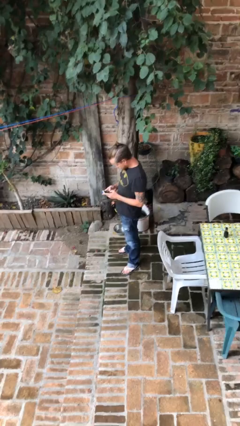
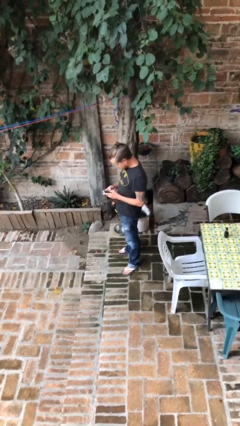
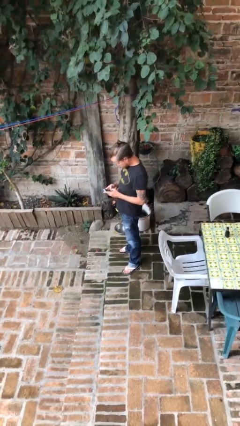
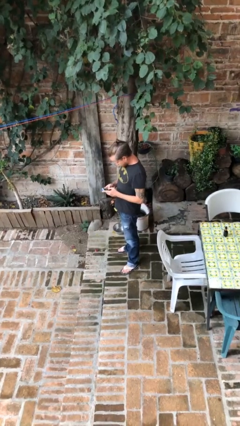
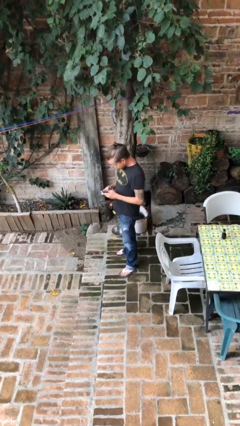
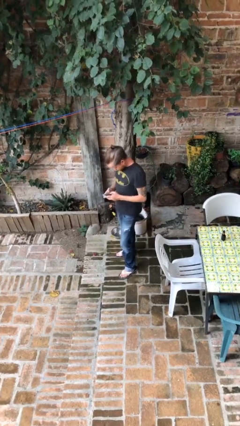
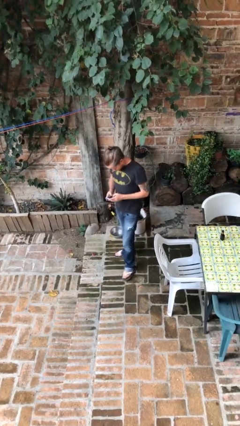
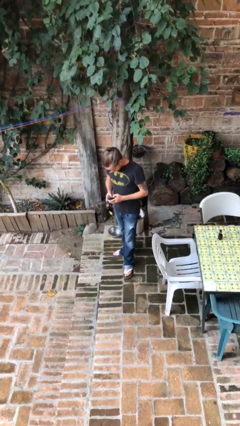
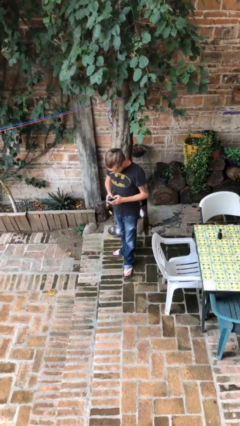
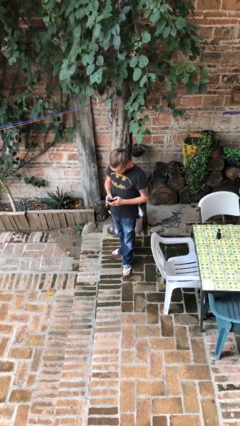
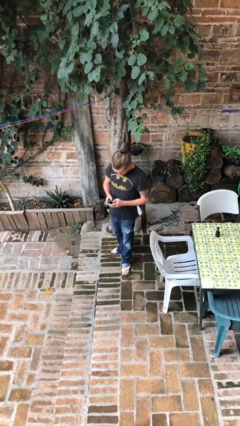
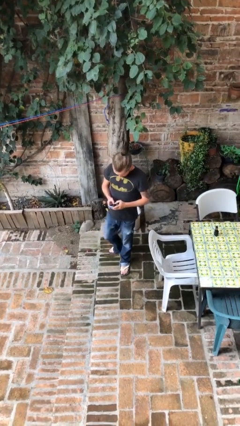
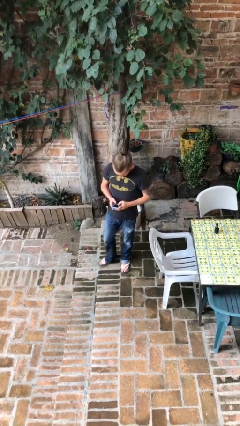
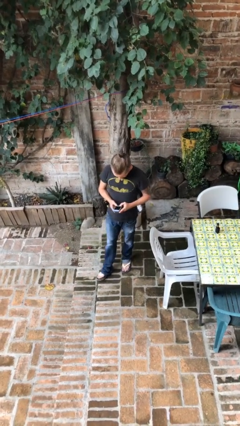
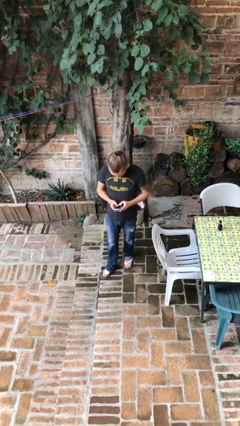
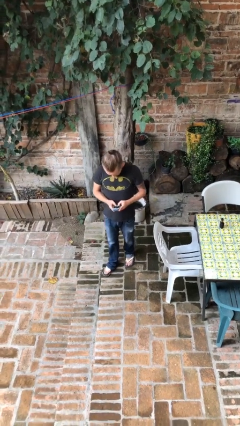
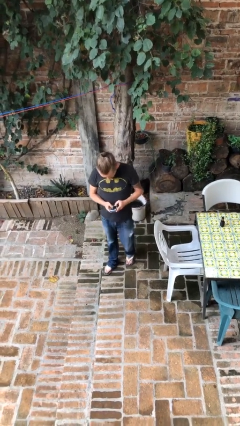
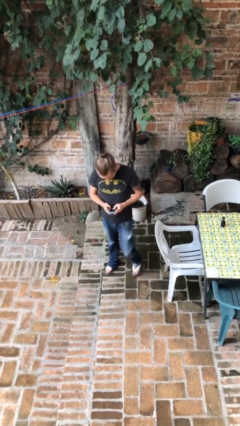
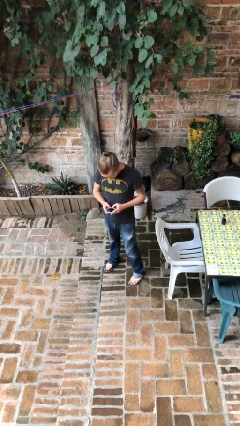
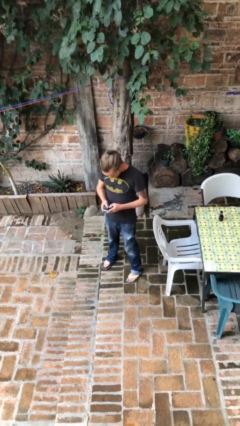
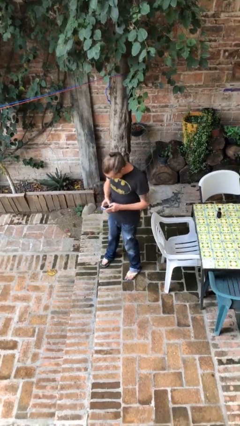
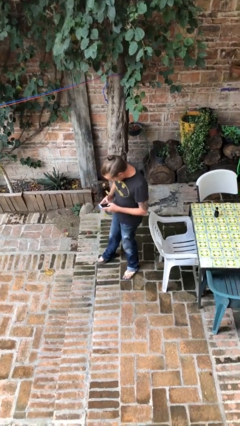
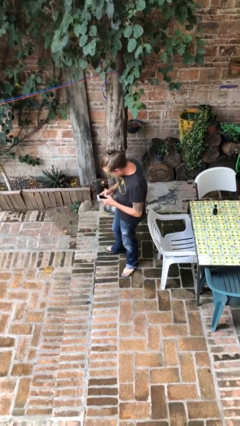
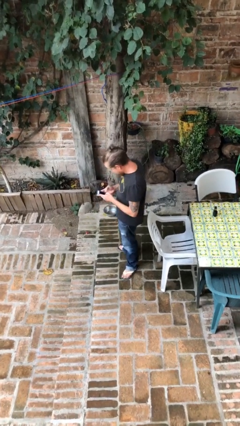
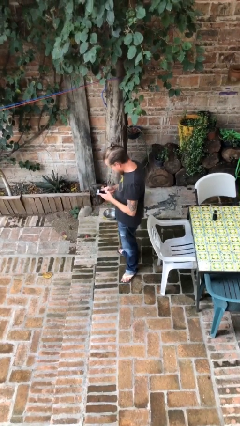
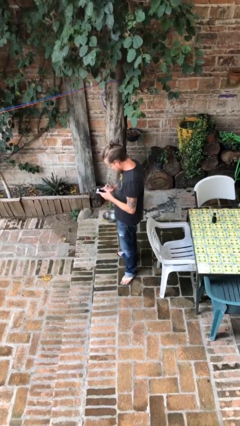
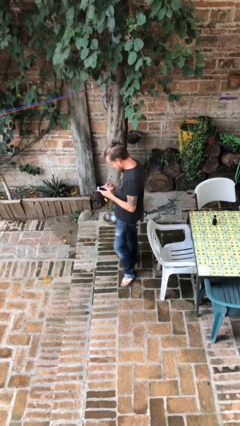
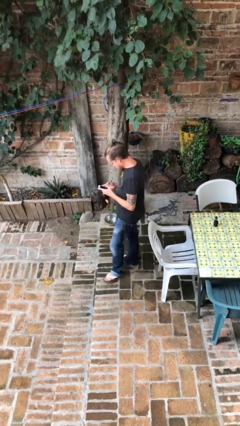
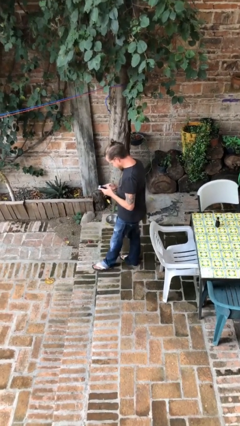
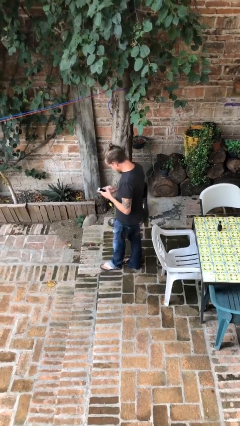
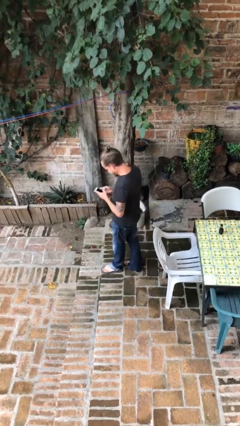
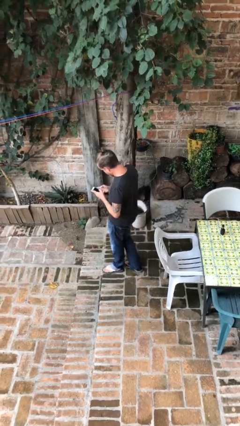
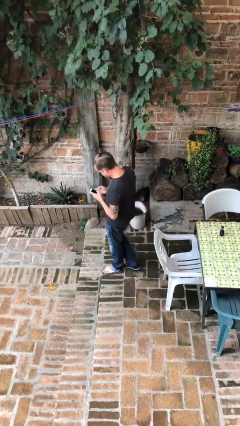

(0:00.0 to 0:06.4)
person texts on phone

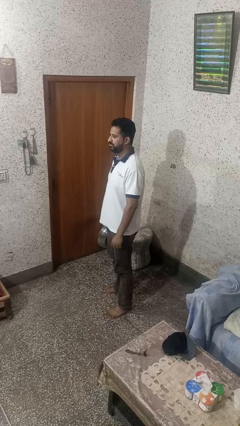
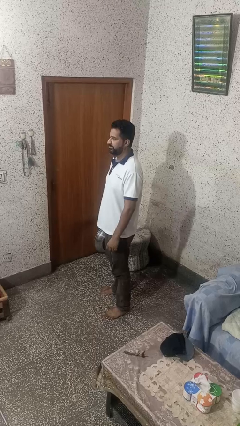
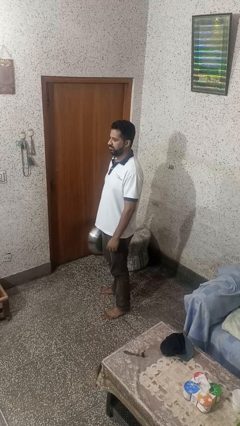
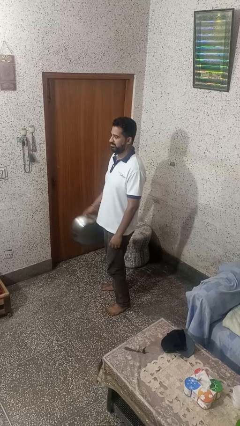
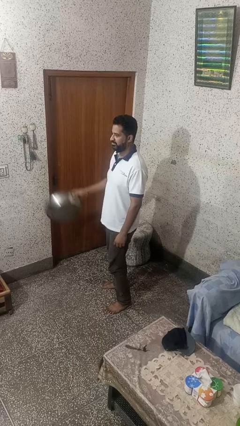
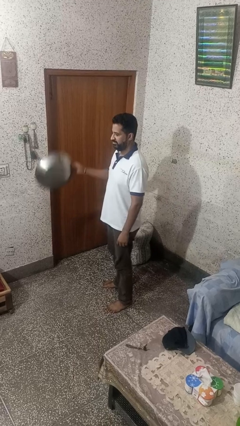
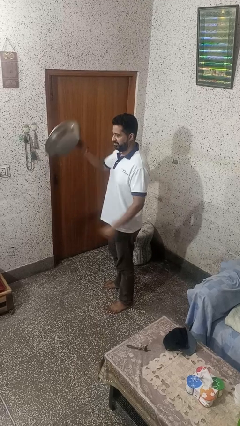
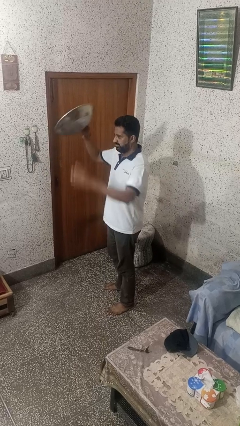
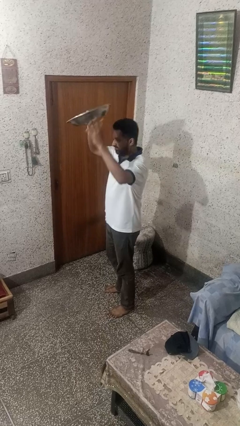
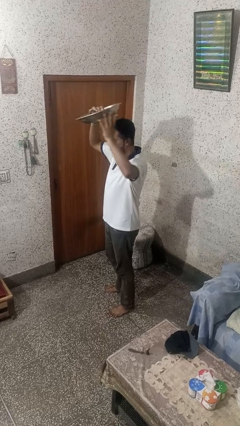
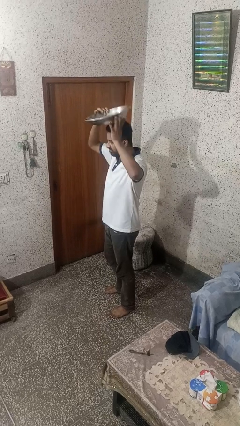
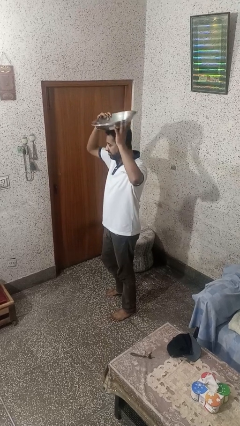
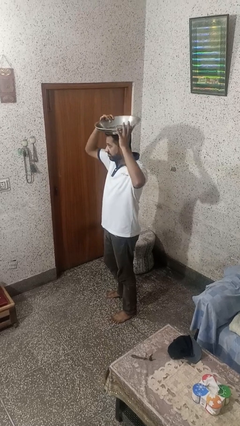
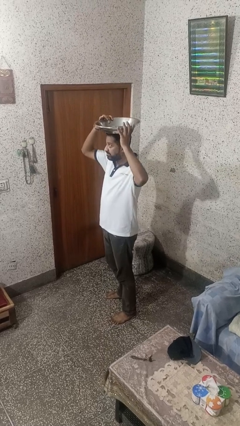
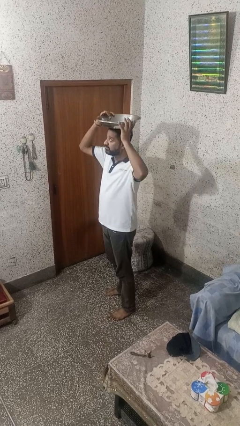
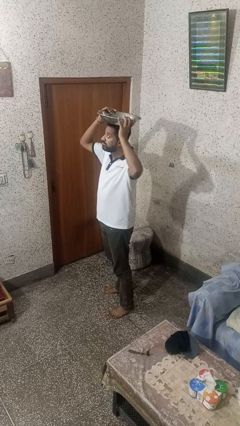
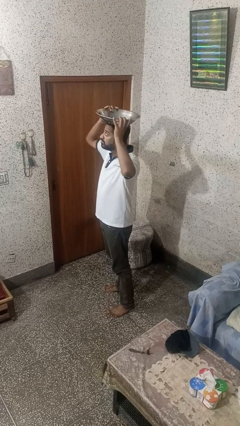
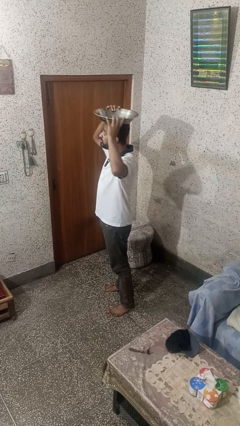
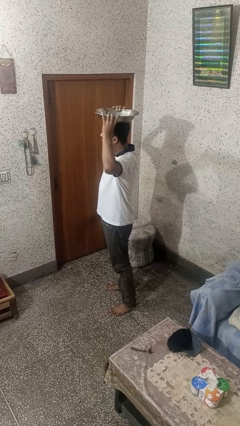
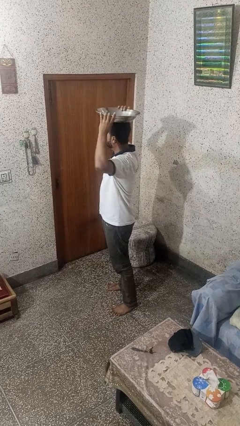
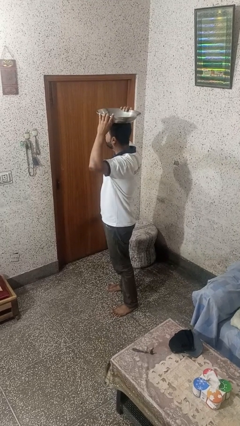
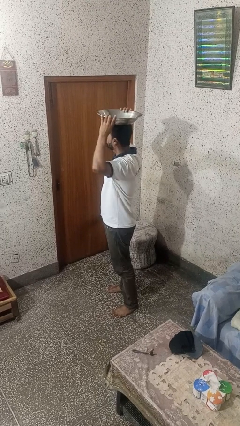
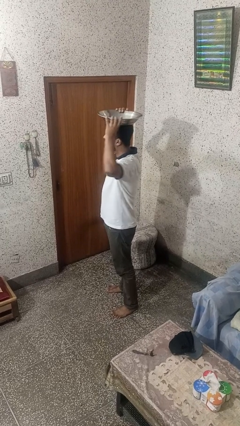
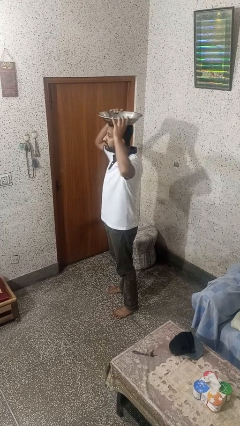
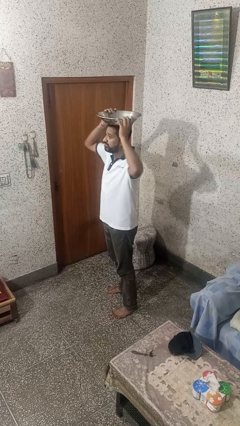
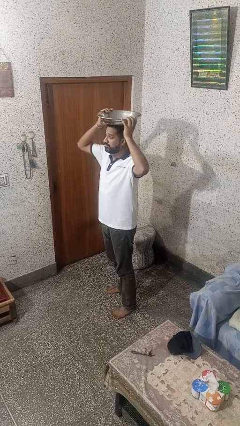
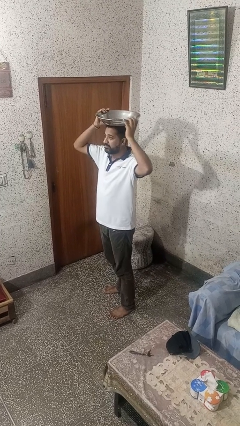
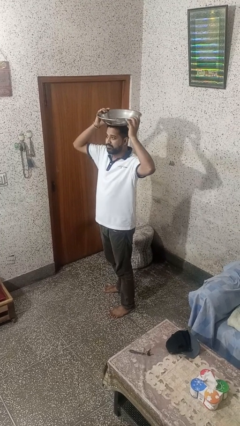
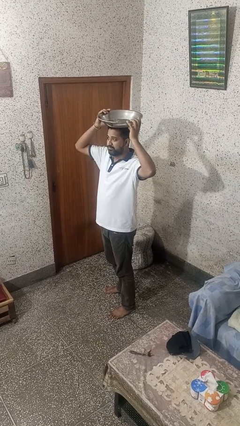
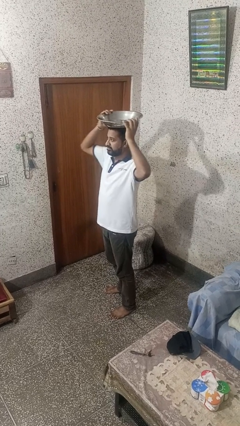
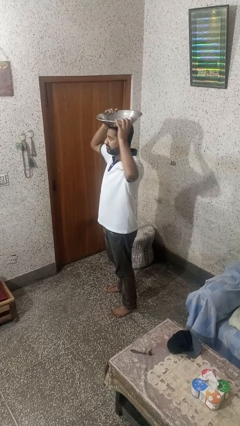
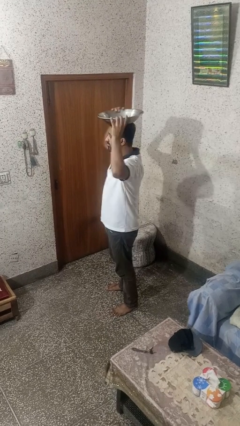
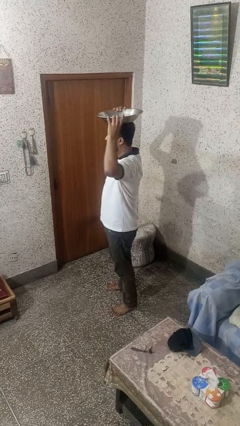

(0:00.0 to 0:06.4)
person holds object above head

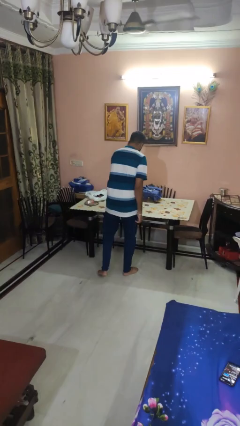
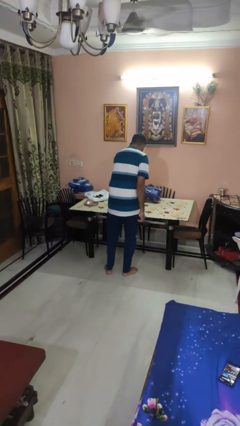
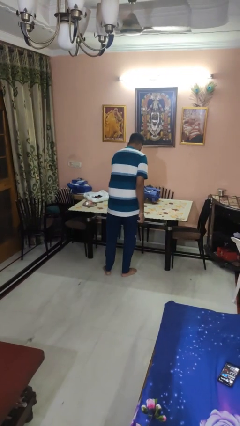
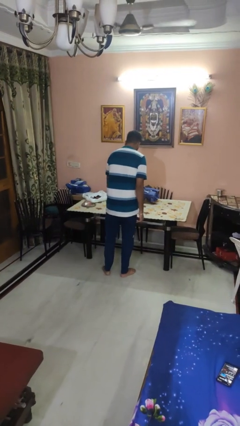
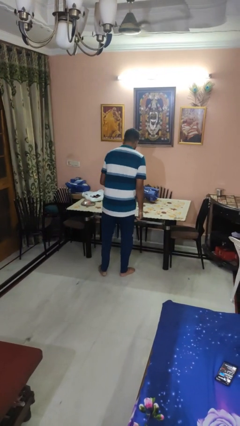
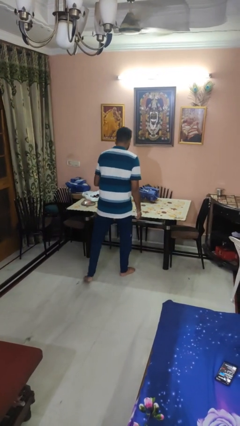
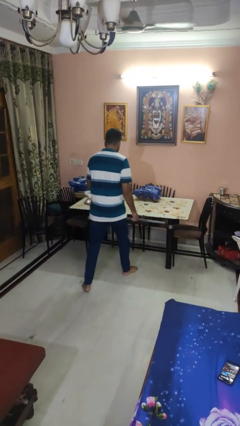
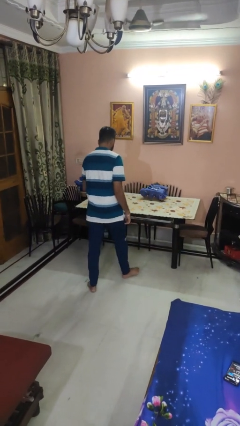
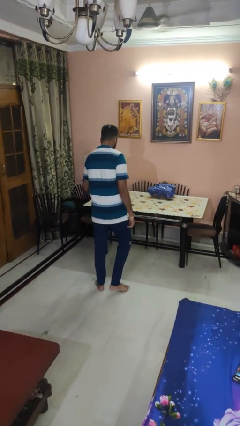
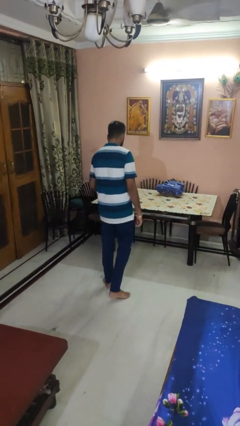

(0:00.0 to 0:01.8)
person picks up object from table

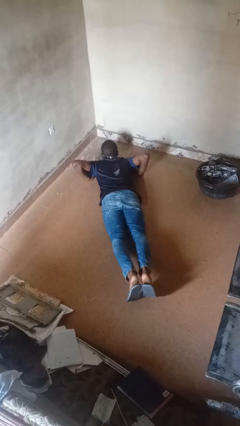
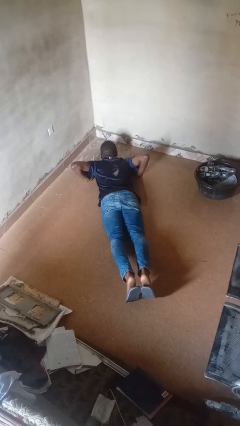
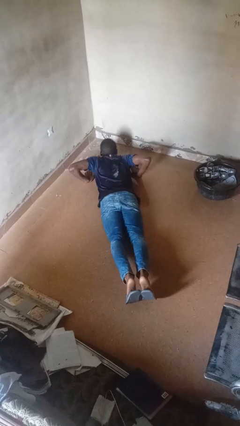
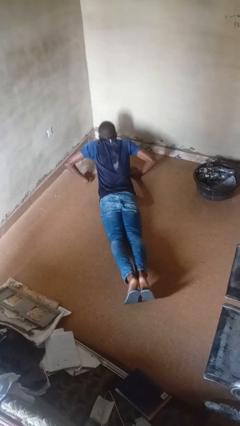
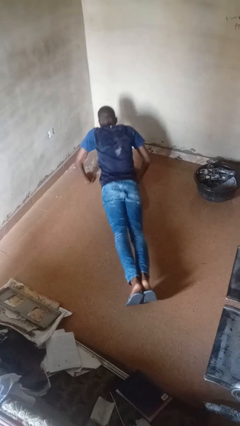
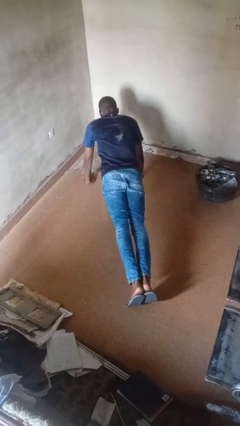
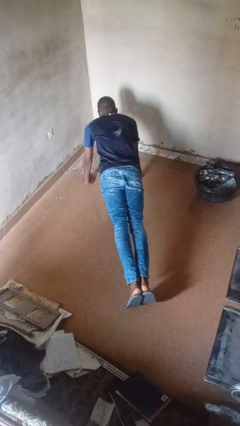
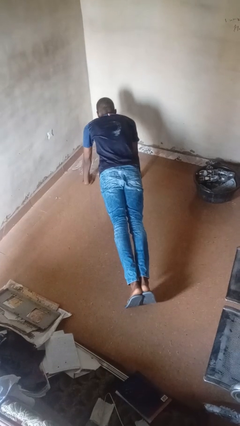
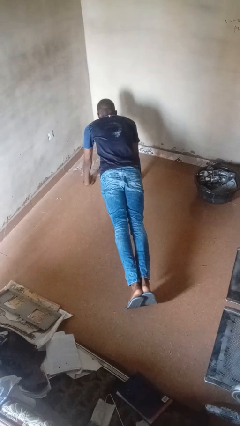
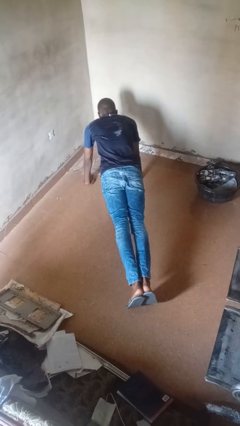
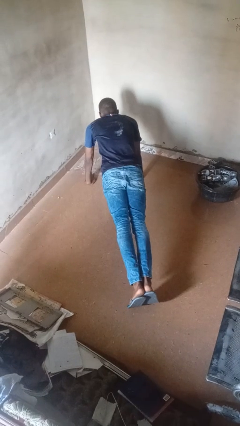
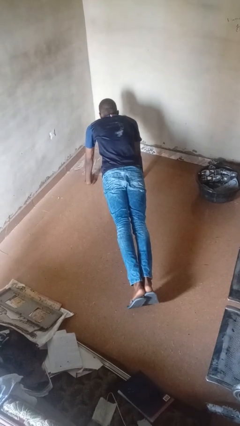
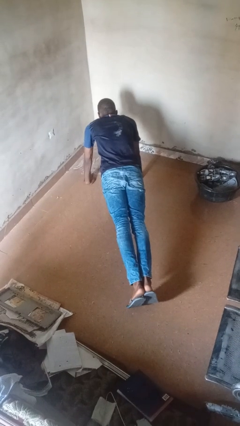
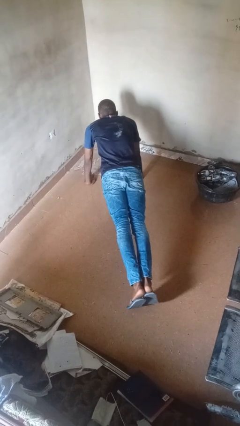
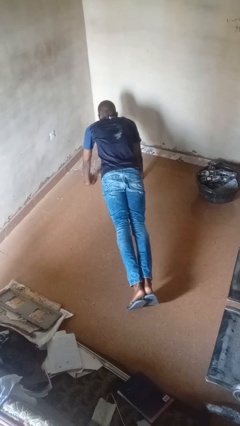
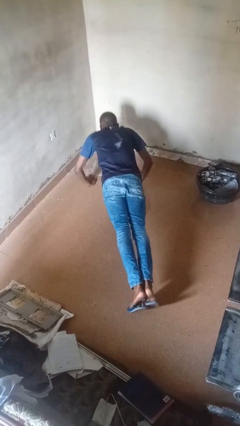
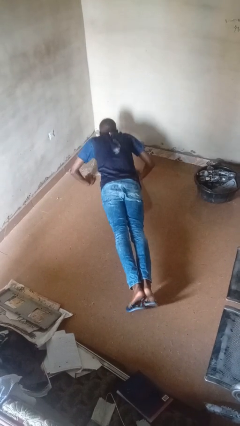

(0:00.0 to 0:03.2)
person exercises with pushup

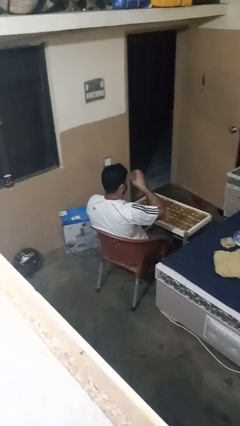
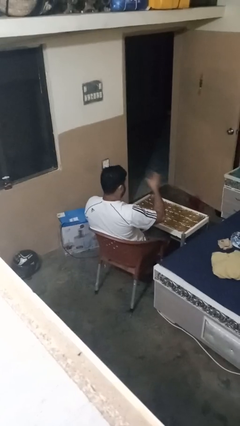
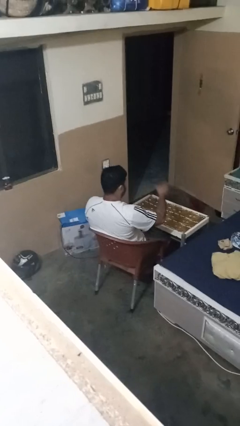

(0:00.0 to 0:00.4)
person puts down object on table
